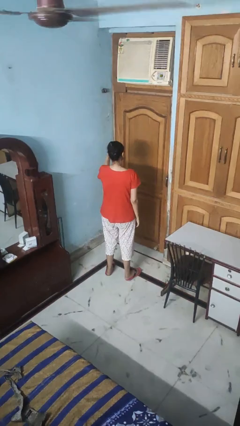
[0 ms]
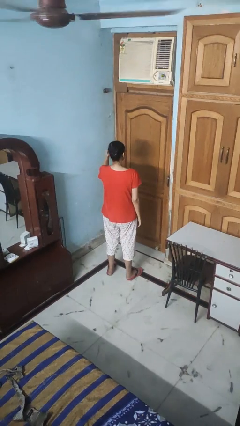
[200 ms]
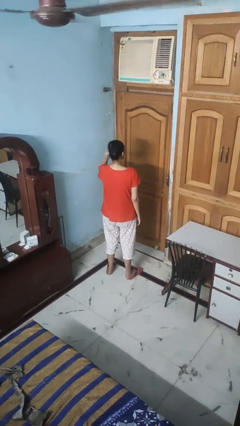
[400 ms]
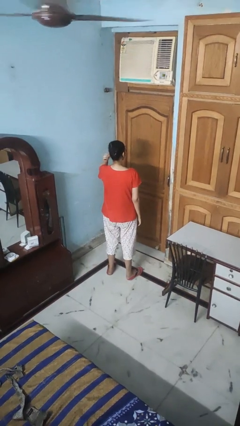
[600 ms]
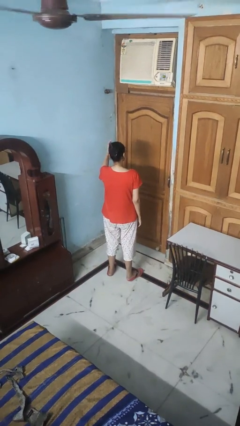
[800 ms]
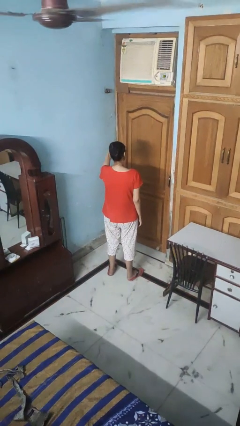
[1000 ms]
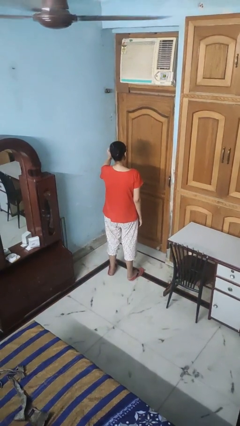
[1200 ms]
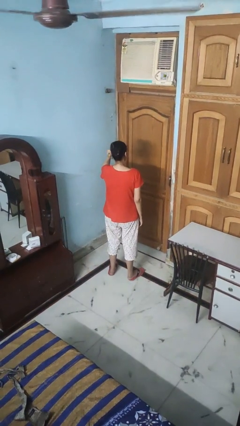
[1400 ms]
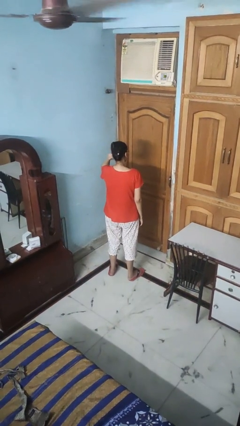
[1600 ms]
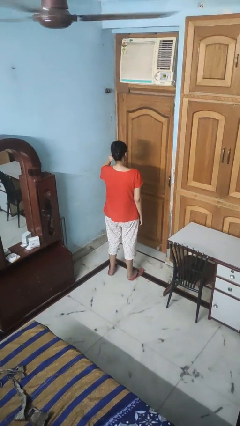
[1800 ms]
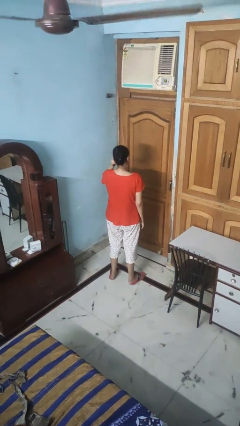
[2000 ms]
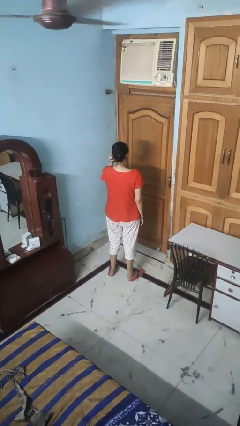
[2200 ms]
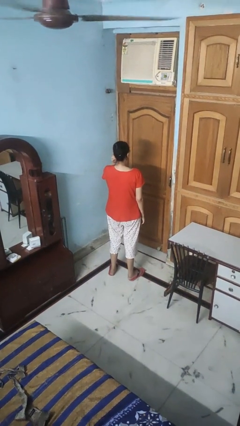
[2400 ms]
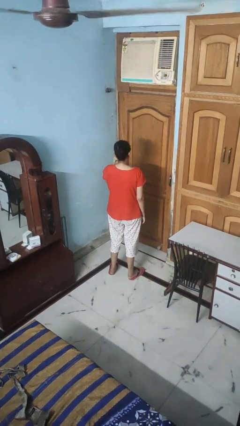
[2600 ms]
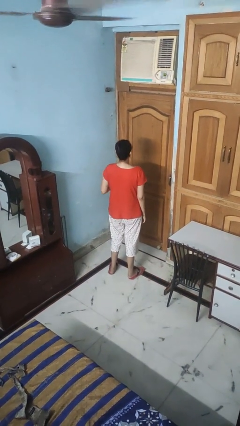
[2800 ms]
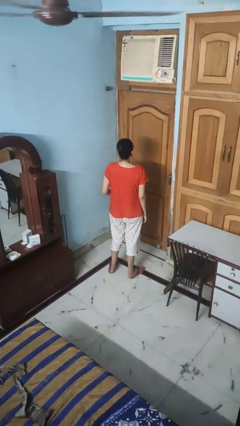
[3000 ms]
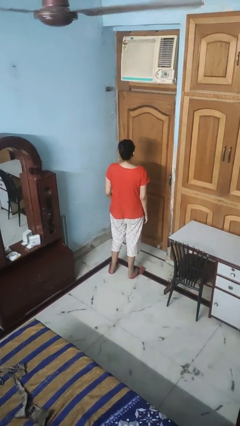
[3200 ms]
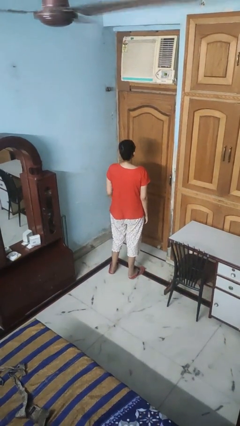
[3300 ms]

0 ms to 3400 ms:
person strokes hair

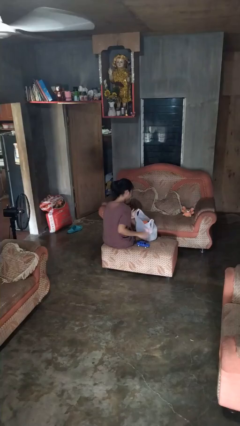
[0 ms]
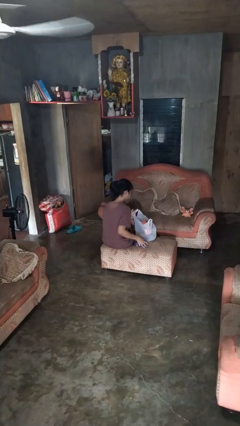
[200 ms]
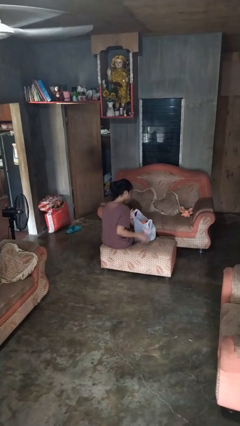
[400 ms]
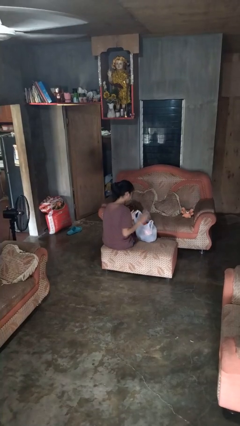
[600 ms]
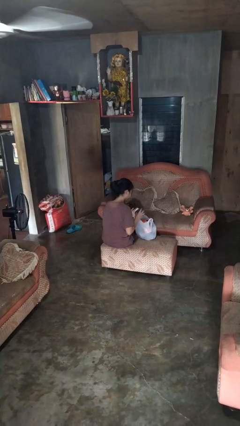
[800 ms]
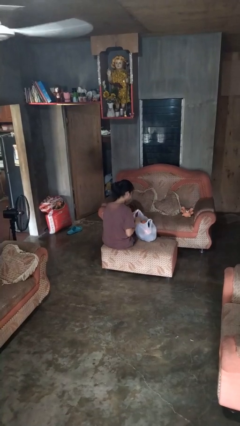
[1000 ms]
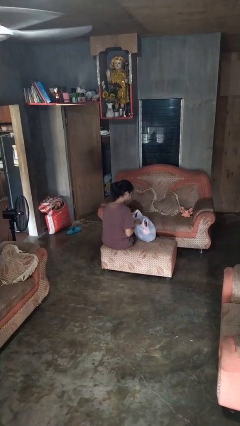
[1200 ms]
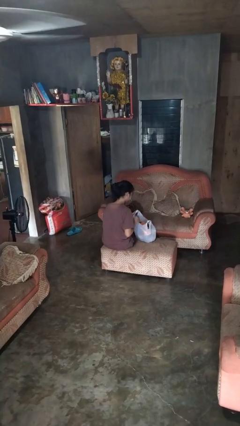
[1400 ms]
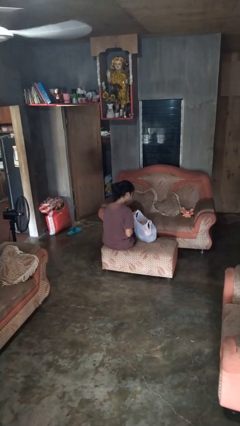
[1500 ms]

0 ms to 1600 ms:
person puts object into bag

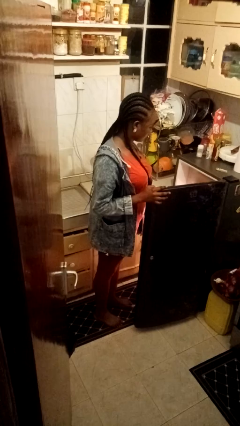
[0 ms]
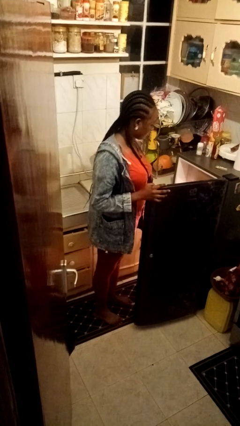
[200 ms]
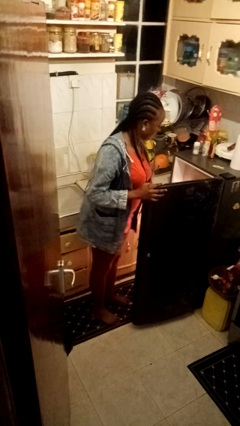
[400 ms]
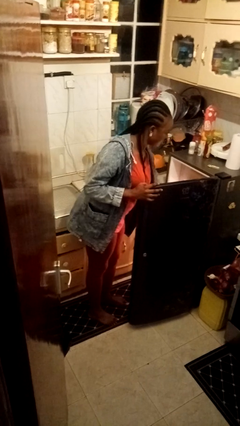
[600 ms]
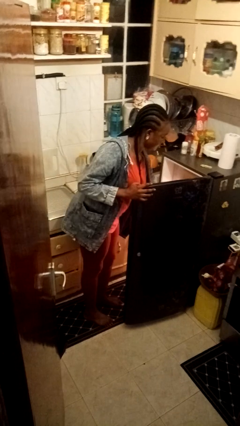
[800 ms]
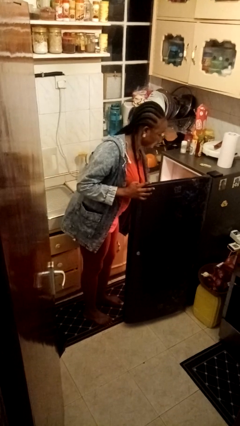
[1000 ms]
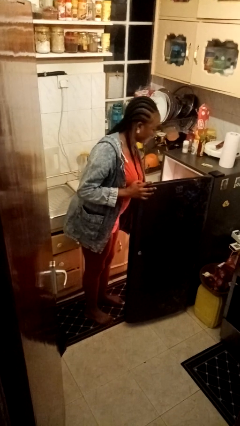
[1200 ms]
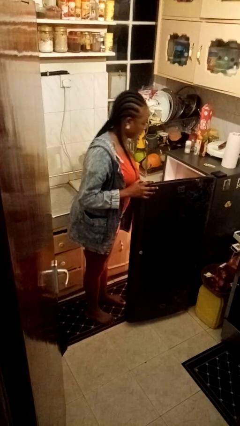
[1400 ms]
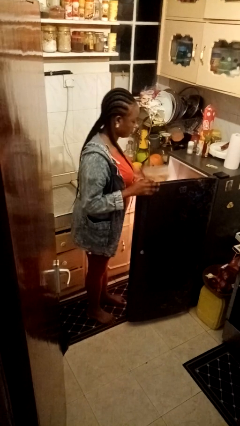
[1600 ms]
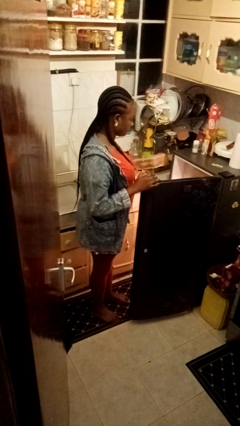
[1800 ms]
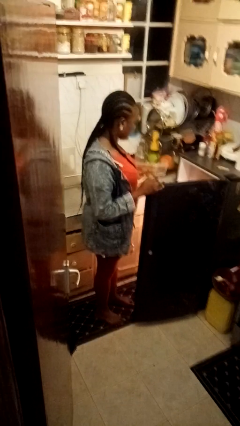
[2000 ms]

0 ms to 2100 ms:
person takes object from refrigerator

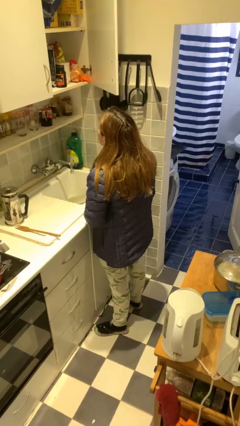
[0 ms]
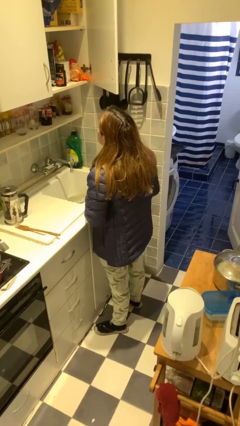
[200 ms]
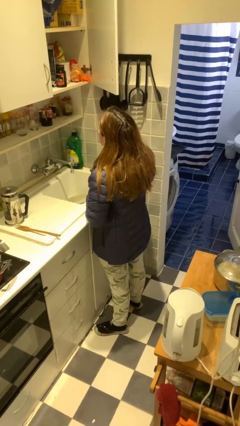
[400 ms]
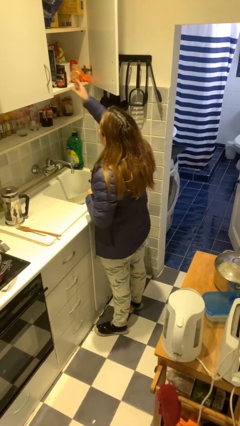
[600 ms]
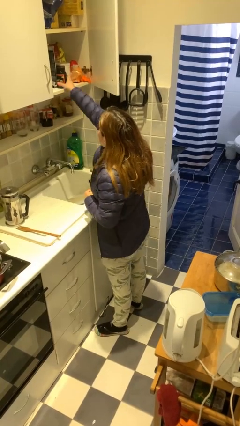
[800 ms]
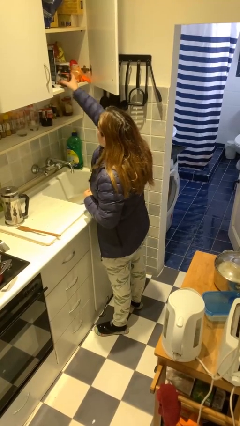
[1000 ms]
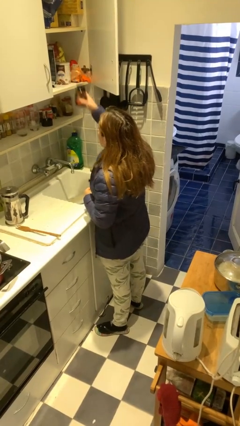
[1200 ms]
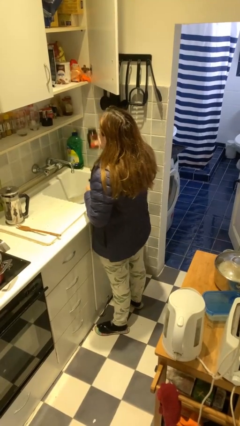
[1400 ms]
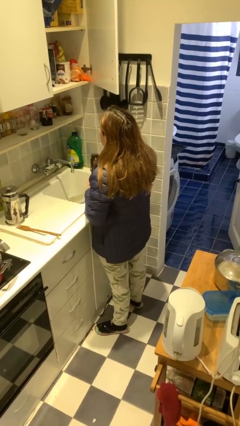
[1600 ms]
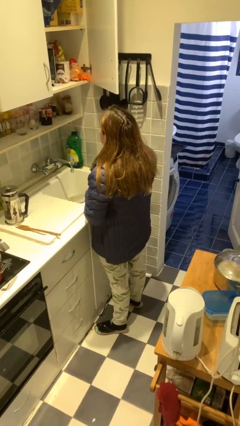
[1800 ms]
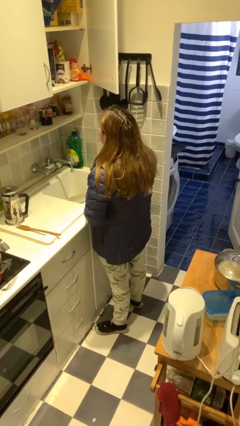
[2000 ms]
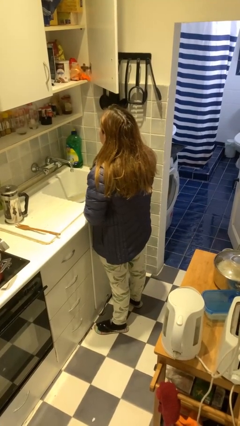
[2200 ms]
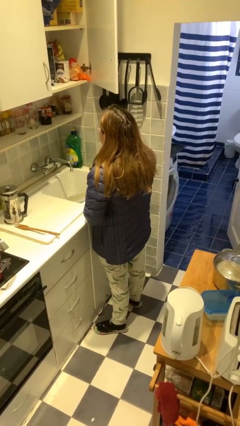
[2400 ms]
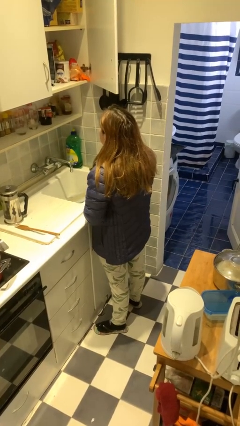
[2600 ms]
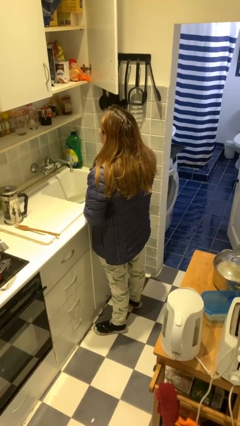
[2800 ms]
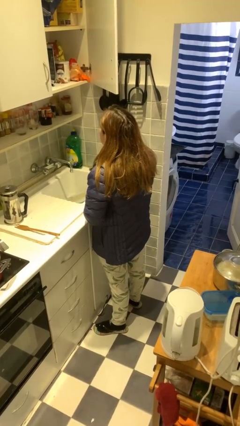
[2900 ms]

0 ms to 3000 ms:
person takes object from cabinet

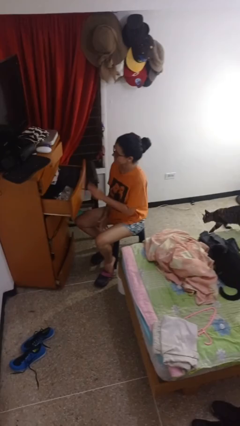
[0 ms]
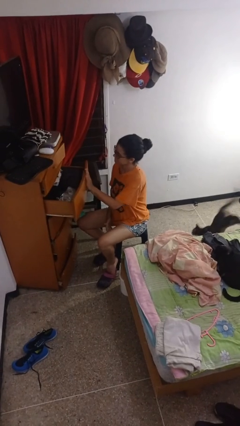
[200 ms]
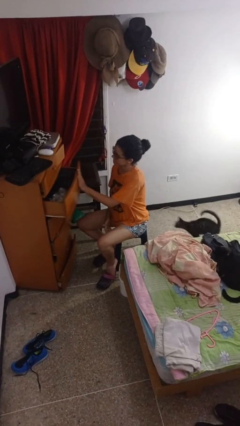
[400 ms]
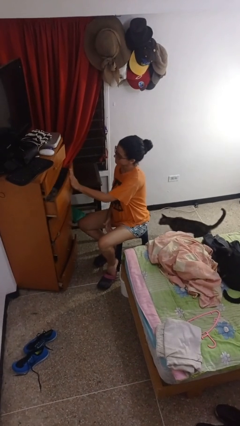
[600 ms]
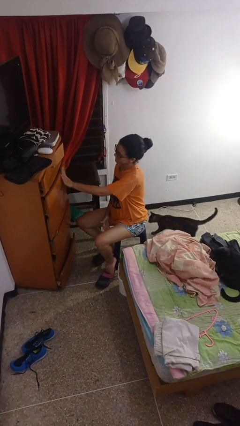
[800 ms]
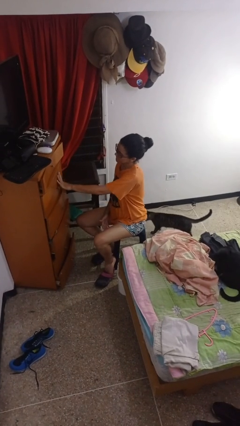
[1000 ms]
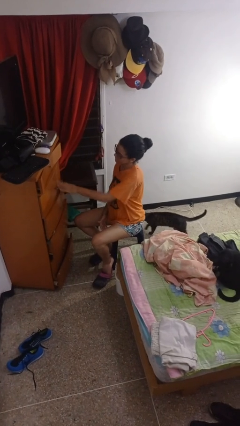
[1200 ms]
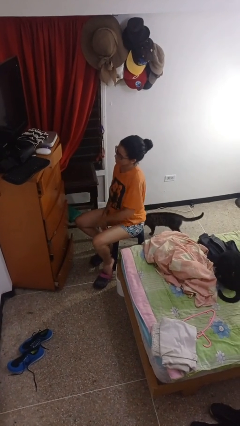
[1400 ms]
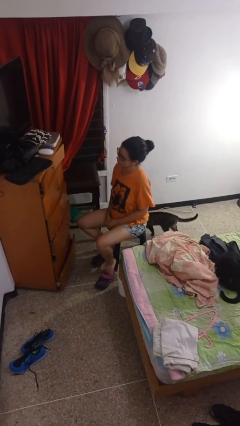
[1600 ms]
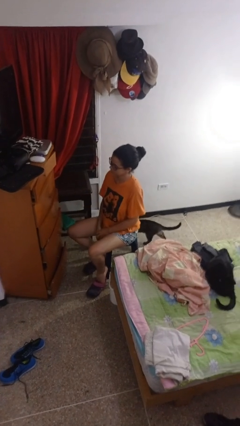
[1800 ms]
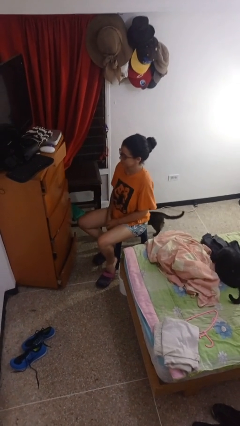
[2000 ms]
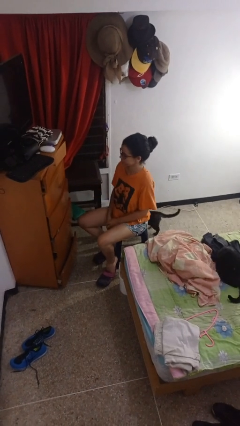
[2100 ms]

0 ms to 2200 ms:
person closes dresser drawer

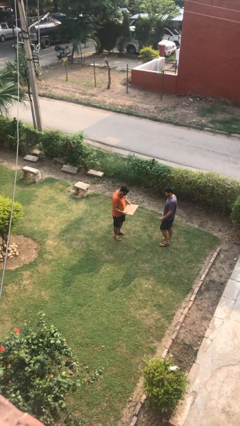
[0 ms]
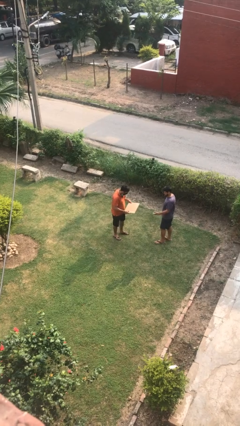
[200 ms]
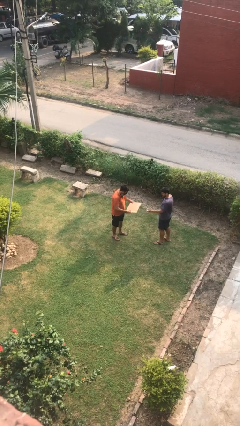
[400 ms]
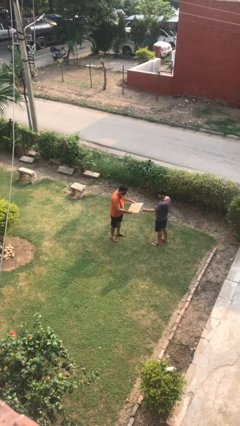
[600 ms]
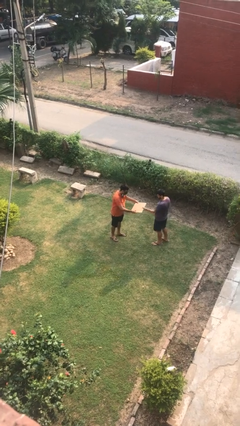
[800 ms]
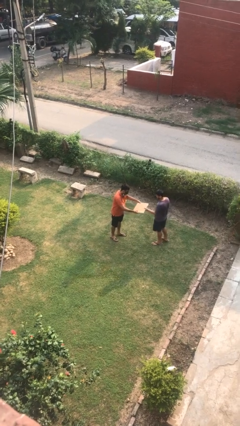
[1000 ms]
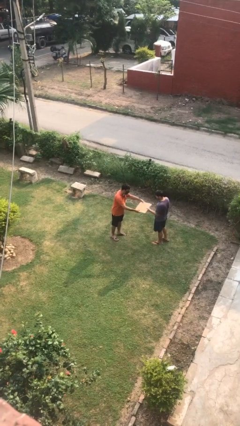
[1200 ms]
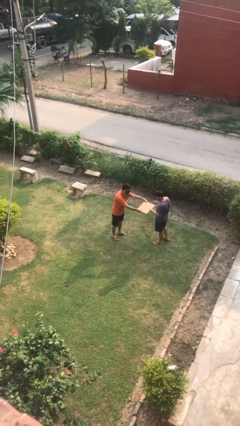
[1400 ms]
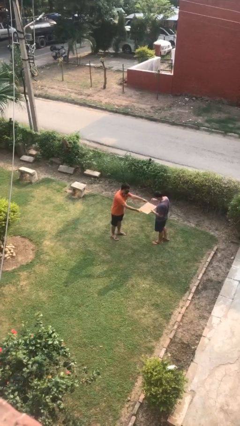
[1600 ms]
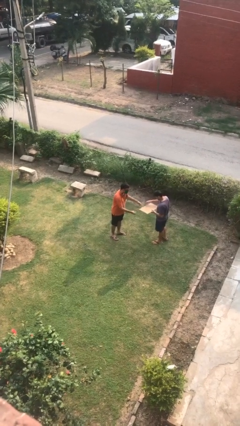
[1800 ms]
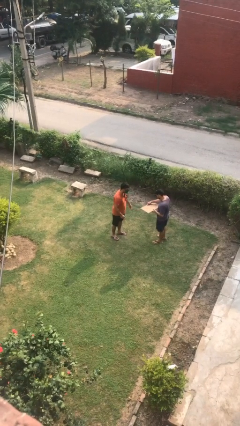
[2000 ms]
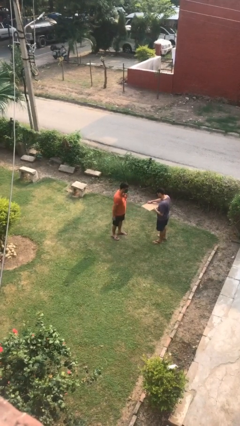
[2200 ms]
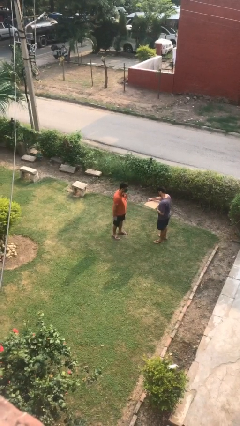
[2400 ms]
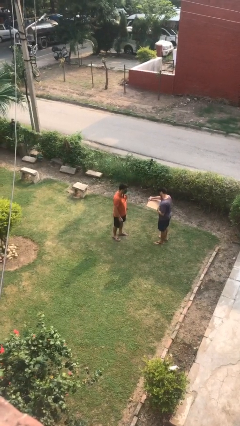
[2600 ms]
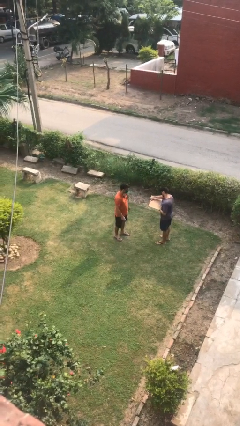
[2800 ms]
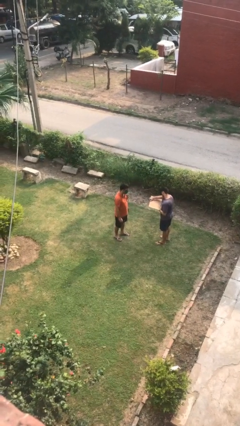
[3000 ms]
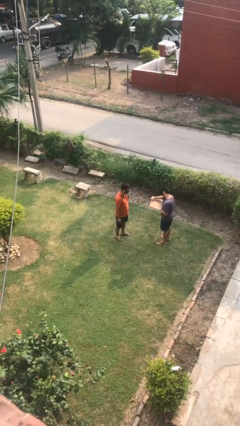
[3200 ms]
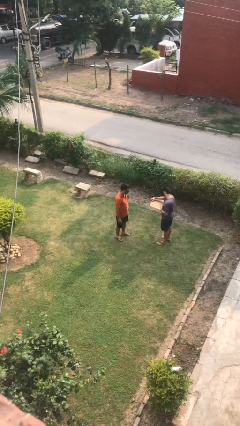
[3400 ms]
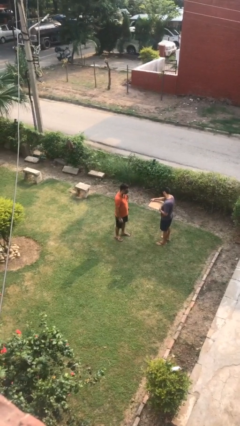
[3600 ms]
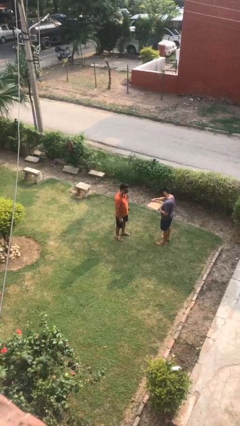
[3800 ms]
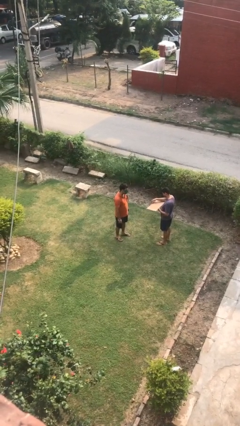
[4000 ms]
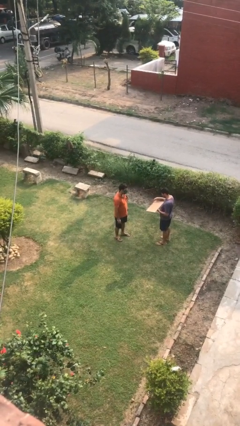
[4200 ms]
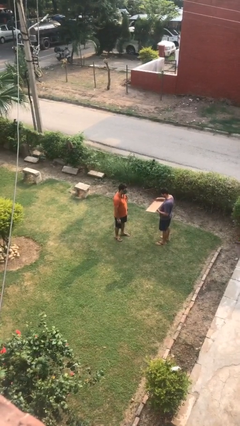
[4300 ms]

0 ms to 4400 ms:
person transfers object to person

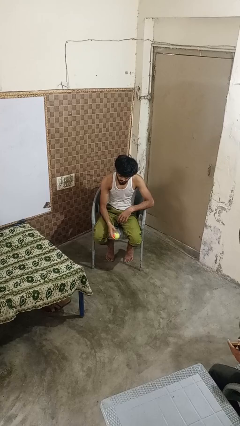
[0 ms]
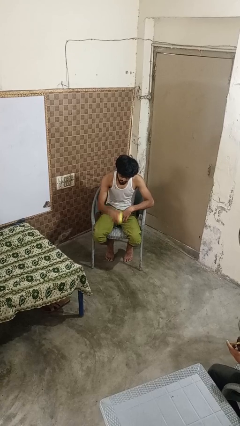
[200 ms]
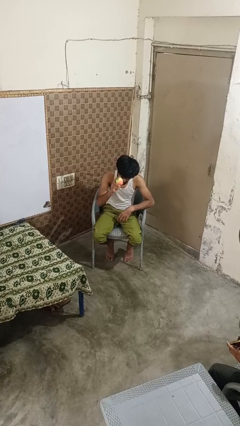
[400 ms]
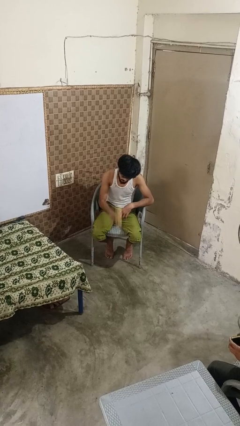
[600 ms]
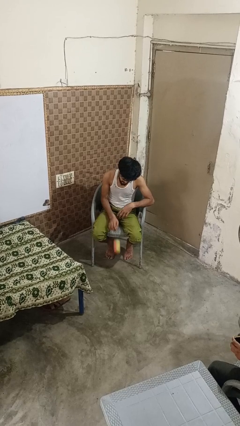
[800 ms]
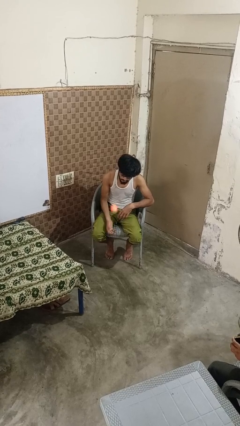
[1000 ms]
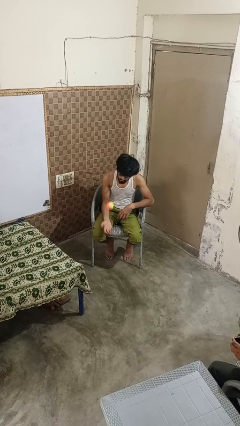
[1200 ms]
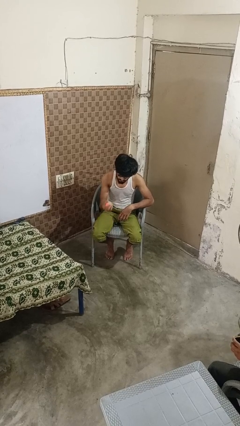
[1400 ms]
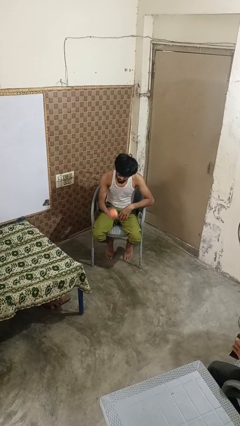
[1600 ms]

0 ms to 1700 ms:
person bounces ball on floor
